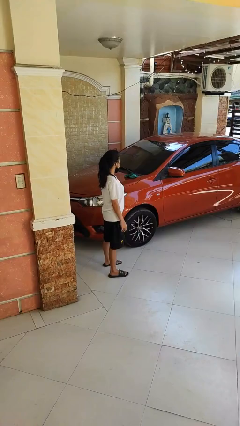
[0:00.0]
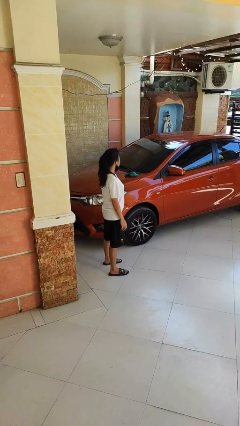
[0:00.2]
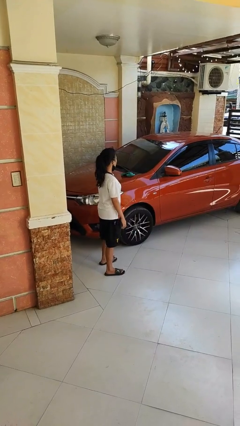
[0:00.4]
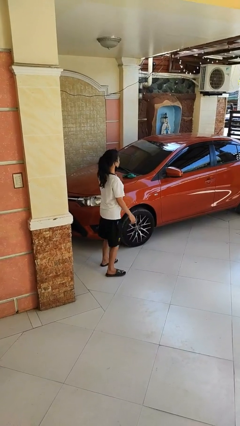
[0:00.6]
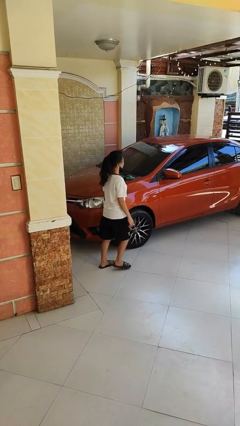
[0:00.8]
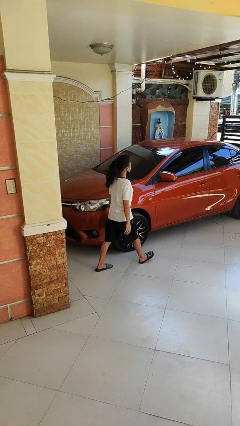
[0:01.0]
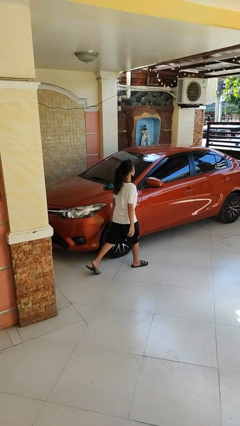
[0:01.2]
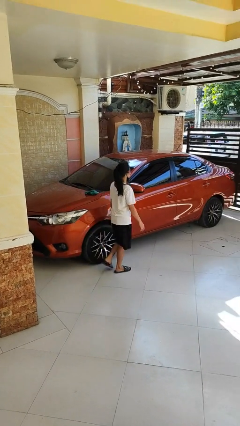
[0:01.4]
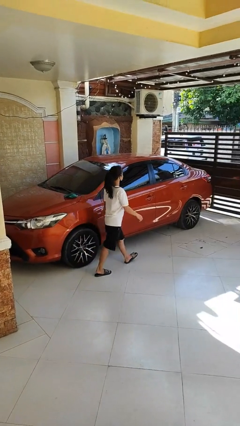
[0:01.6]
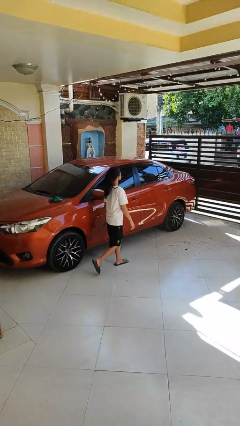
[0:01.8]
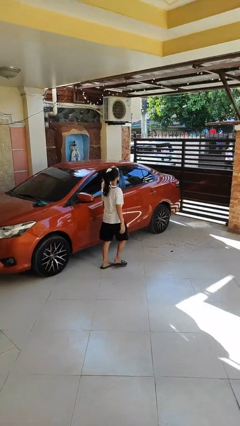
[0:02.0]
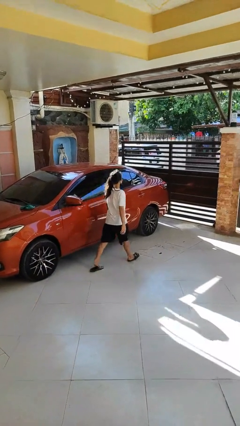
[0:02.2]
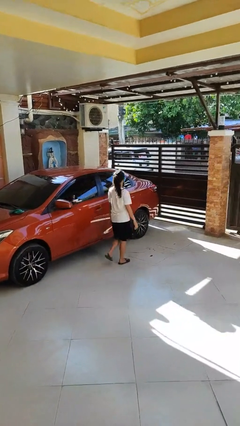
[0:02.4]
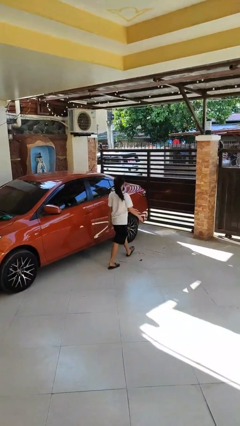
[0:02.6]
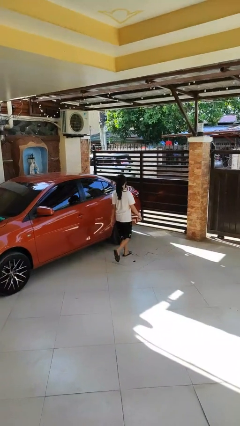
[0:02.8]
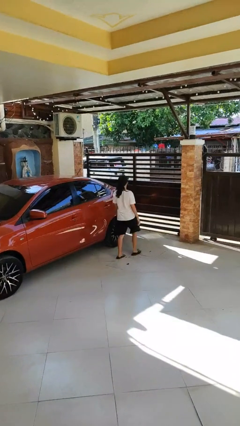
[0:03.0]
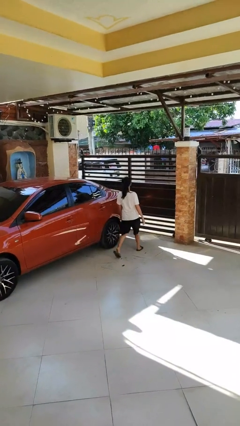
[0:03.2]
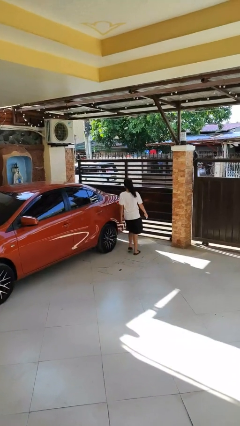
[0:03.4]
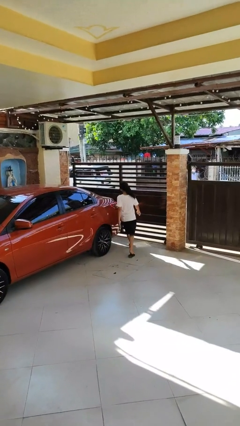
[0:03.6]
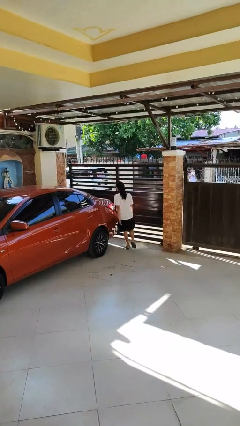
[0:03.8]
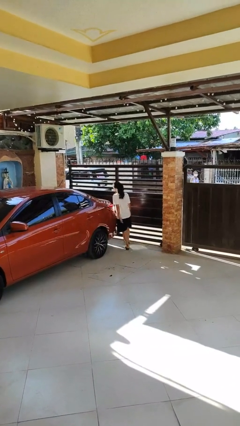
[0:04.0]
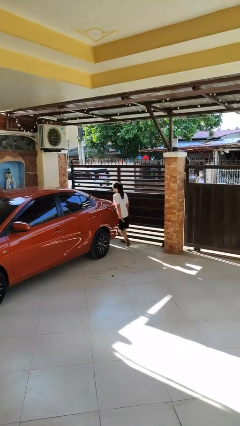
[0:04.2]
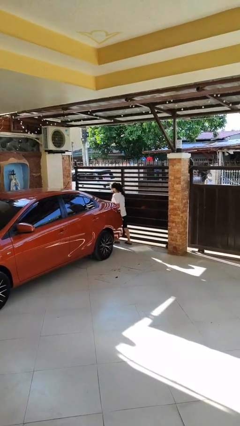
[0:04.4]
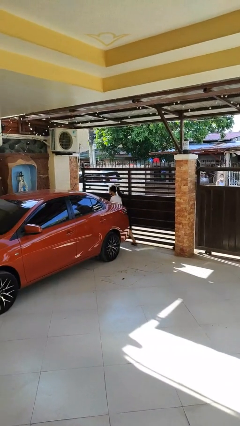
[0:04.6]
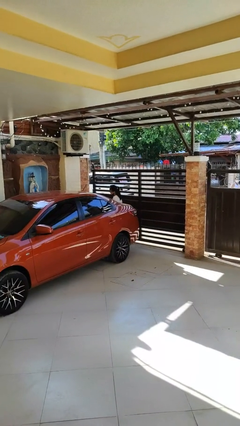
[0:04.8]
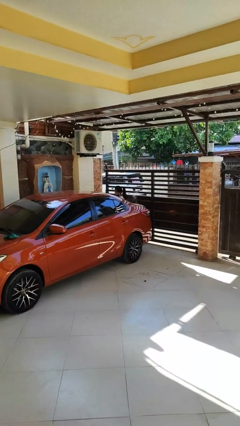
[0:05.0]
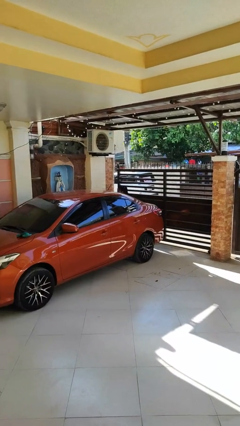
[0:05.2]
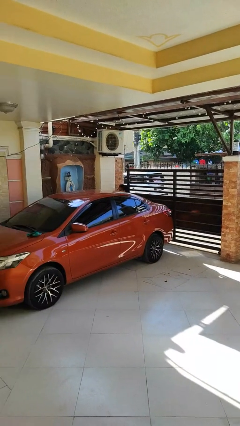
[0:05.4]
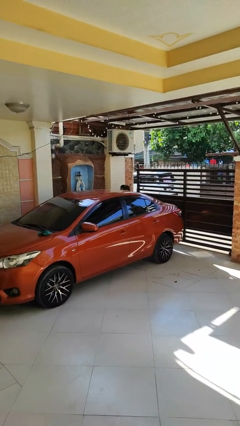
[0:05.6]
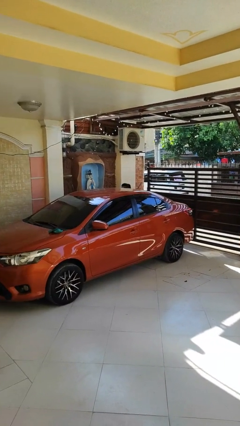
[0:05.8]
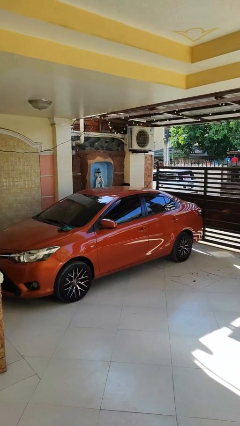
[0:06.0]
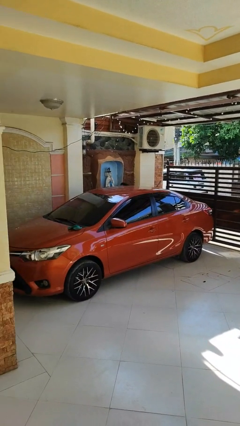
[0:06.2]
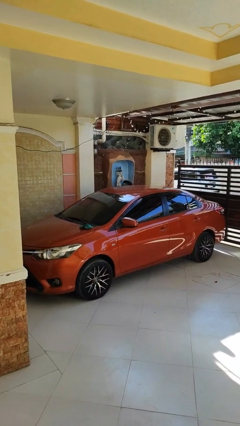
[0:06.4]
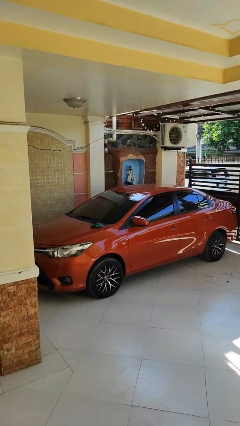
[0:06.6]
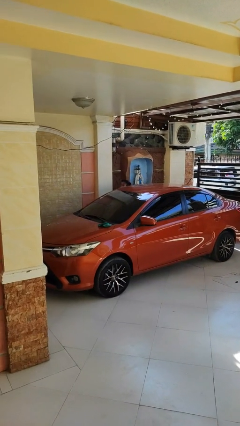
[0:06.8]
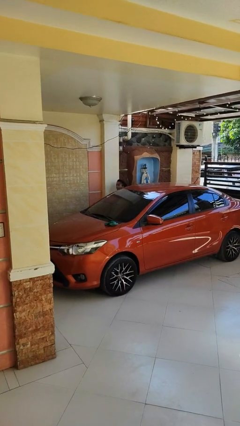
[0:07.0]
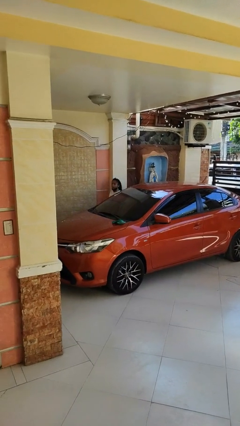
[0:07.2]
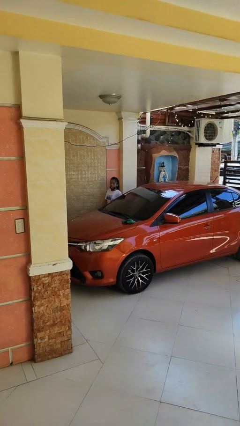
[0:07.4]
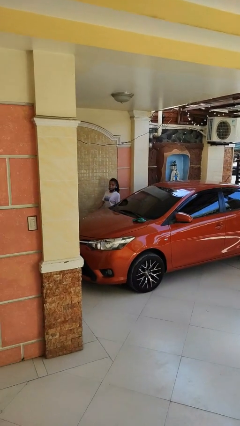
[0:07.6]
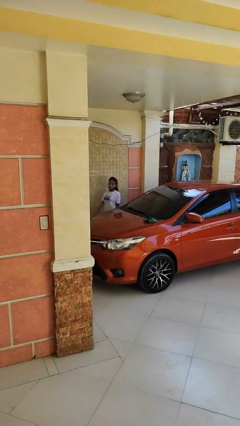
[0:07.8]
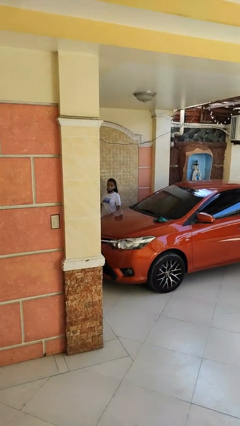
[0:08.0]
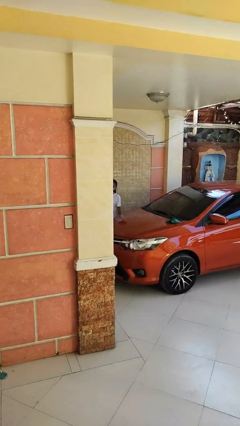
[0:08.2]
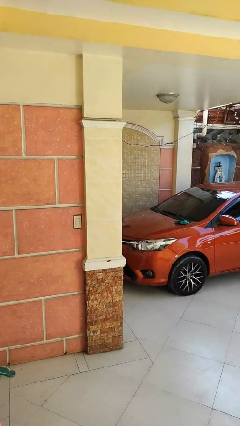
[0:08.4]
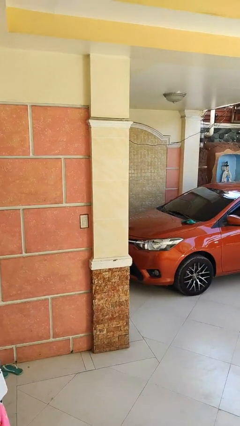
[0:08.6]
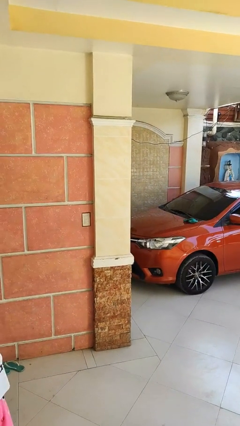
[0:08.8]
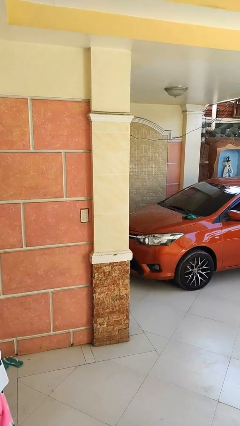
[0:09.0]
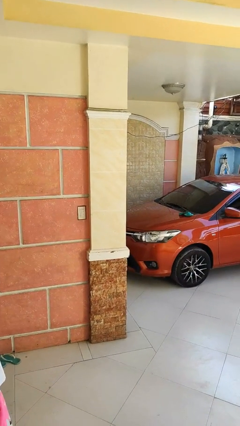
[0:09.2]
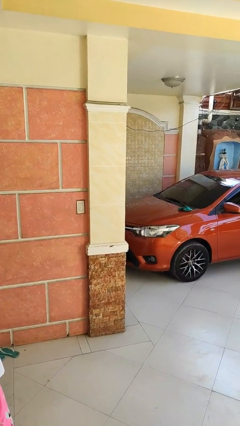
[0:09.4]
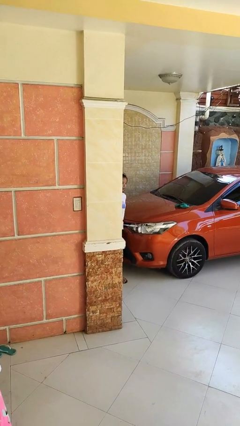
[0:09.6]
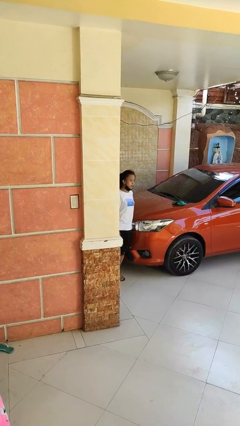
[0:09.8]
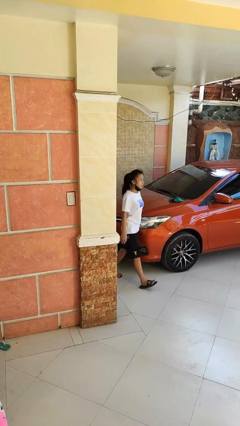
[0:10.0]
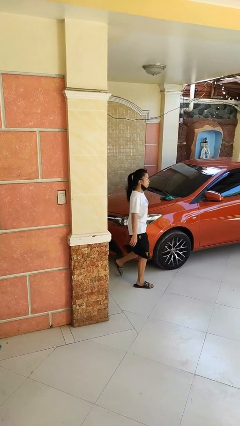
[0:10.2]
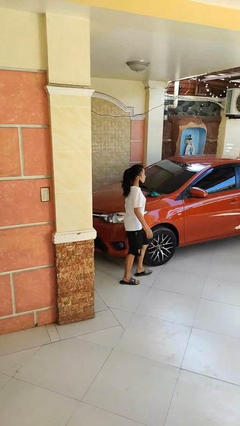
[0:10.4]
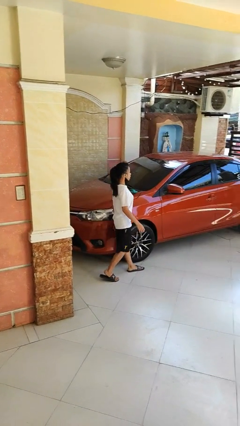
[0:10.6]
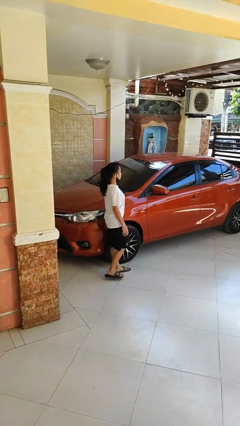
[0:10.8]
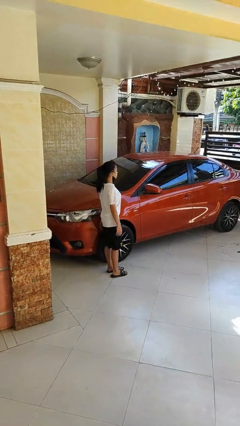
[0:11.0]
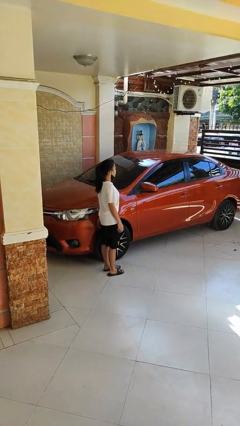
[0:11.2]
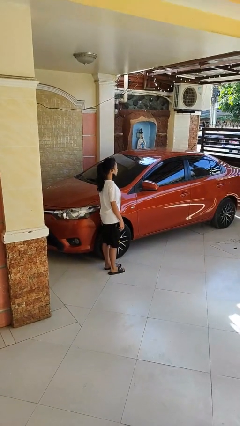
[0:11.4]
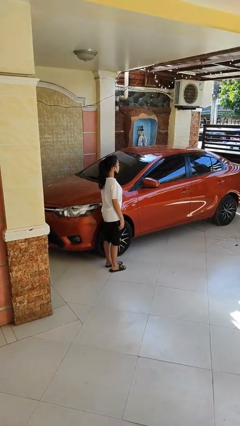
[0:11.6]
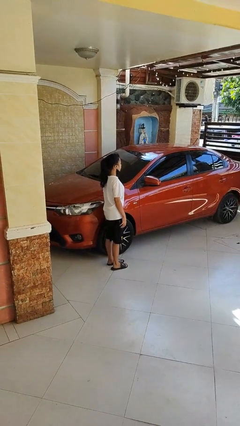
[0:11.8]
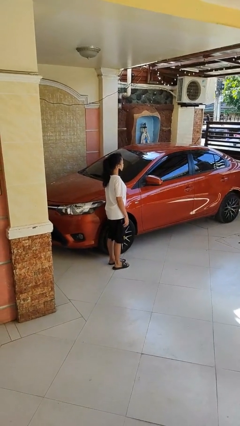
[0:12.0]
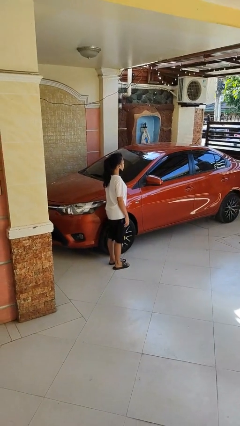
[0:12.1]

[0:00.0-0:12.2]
person walks around car

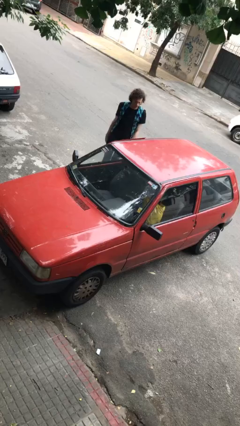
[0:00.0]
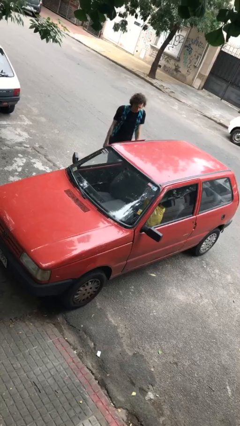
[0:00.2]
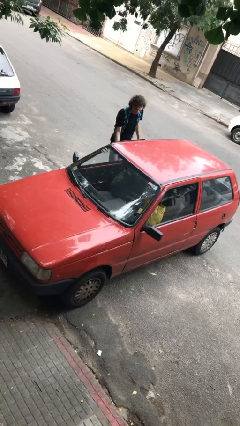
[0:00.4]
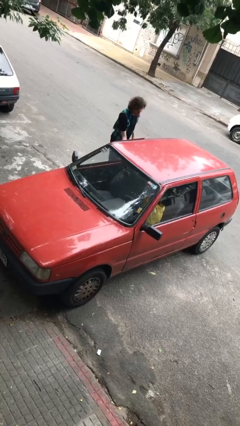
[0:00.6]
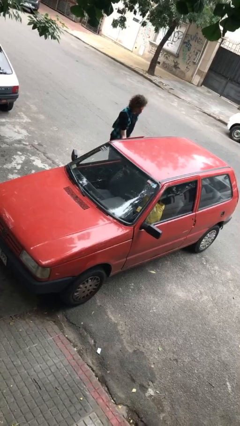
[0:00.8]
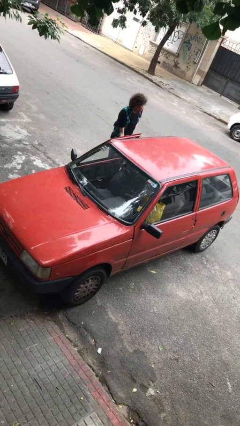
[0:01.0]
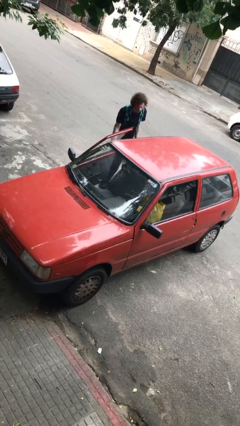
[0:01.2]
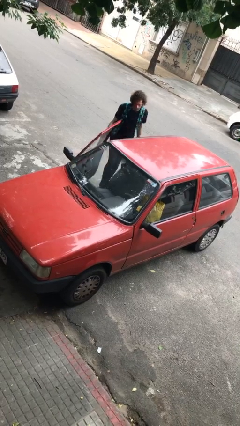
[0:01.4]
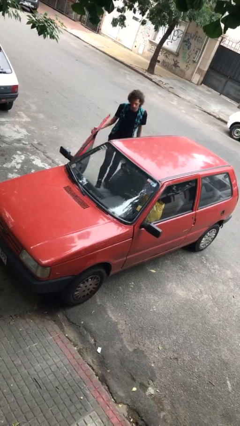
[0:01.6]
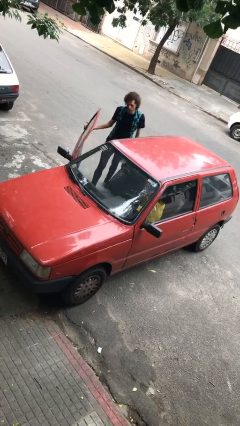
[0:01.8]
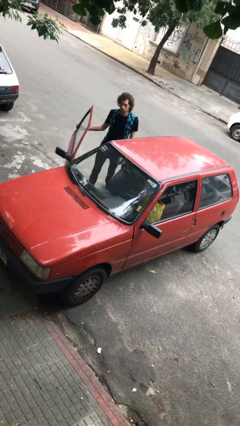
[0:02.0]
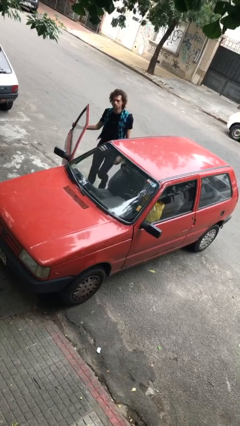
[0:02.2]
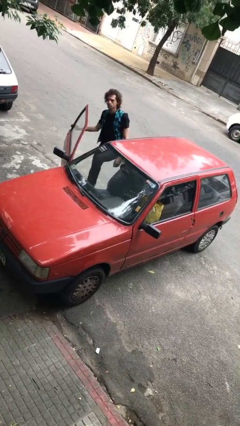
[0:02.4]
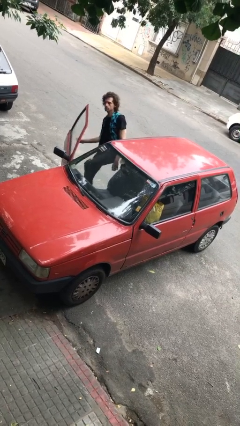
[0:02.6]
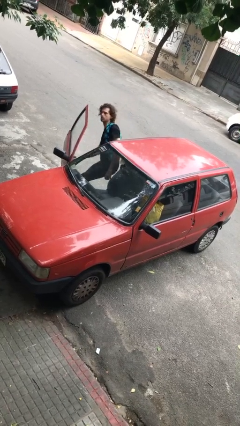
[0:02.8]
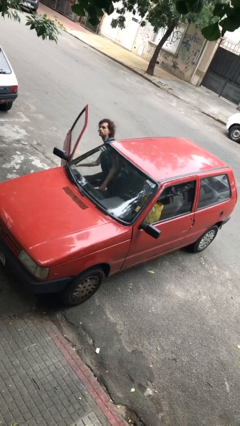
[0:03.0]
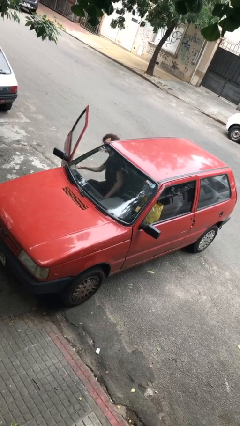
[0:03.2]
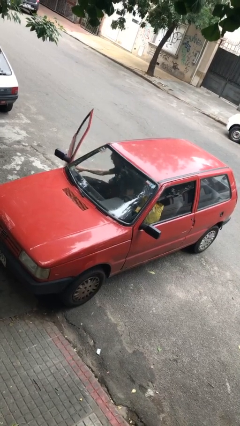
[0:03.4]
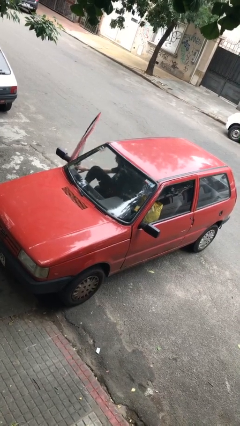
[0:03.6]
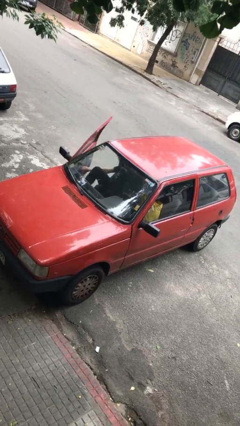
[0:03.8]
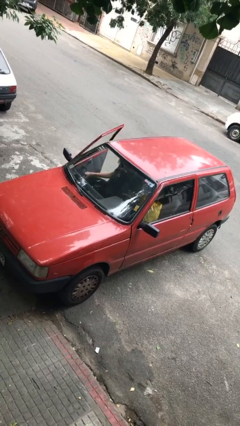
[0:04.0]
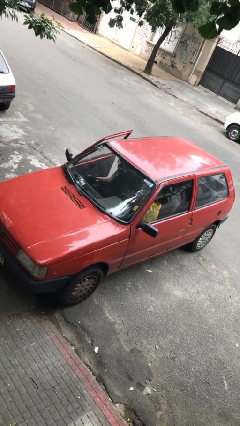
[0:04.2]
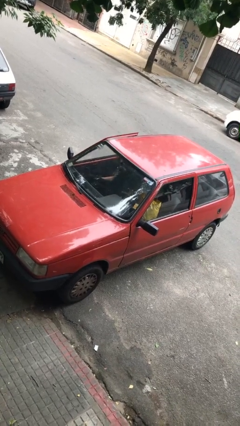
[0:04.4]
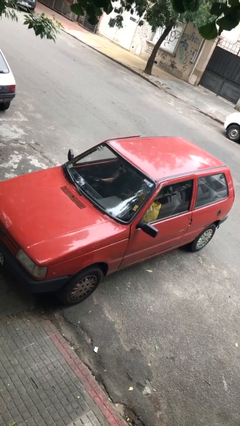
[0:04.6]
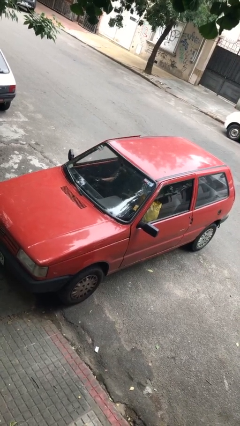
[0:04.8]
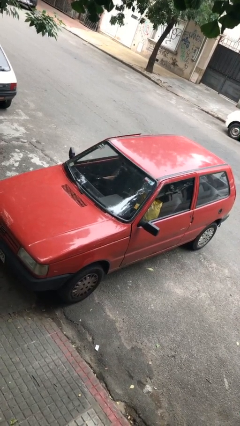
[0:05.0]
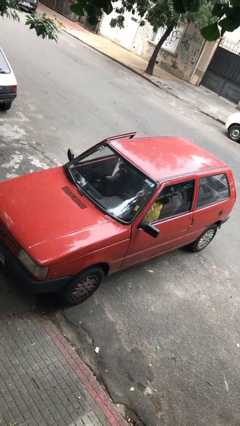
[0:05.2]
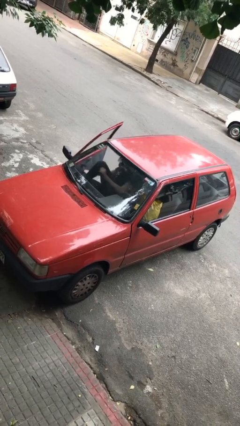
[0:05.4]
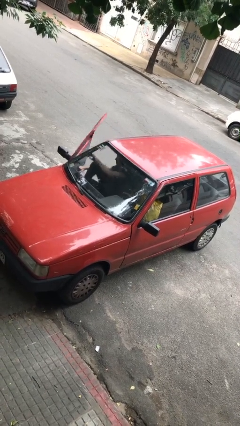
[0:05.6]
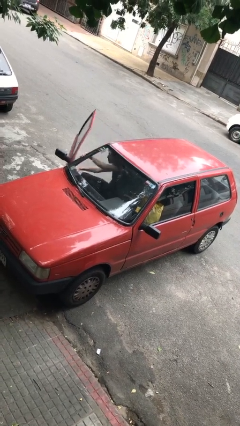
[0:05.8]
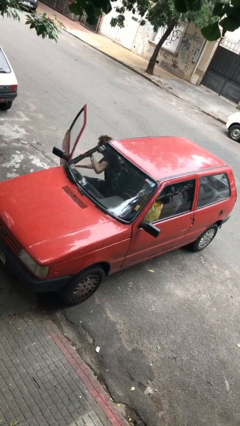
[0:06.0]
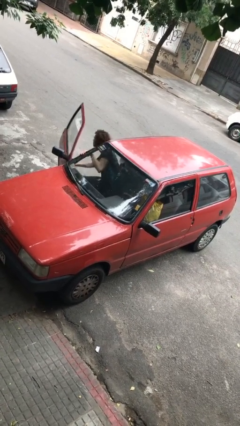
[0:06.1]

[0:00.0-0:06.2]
car picks up person
